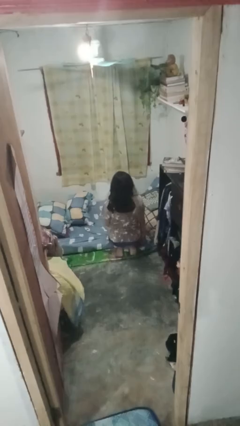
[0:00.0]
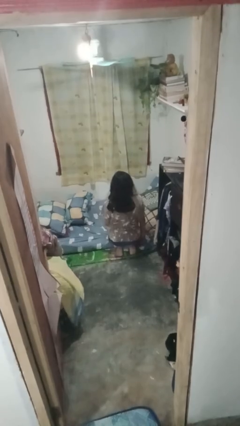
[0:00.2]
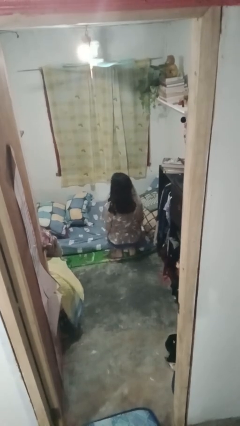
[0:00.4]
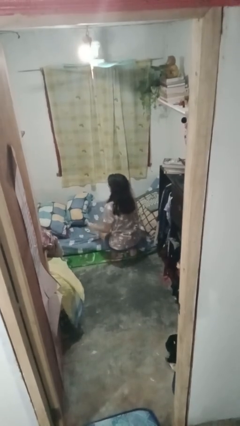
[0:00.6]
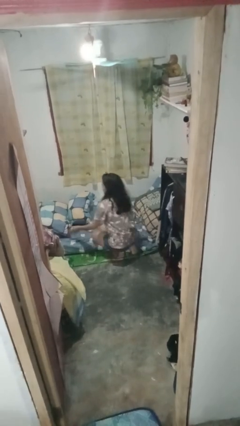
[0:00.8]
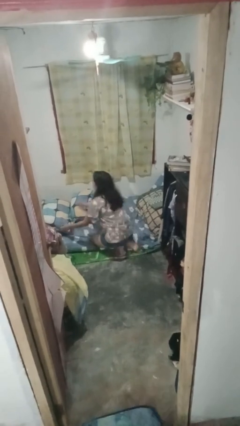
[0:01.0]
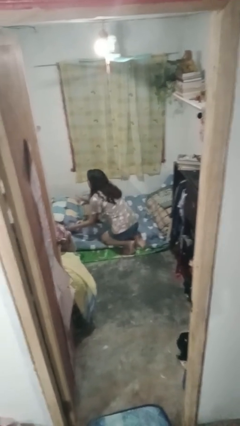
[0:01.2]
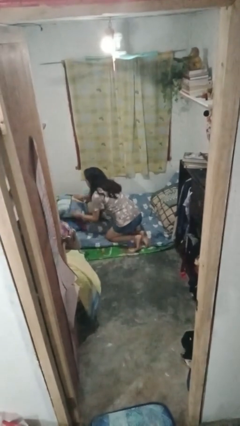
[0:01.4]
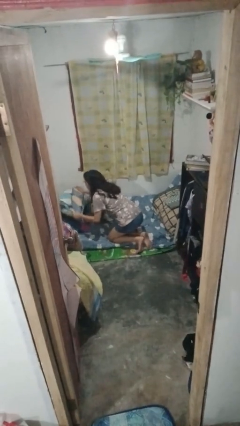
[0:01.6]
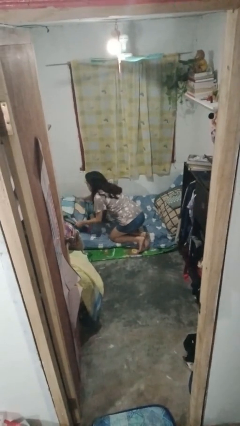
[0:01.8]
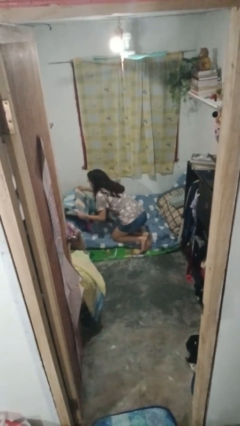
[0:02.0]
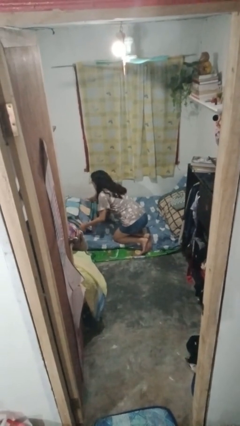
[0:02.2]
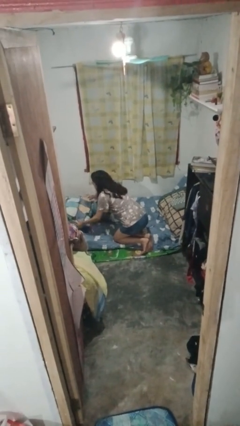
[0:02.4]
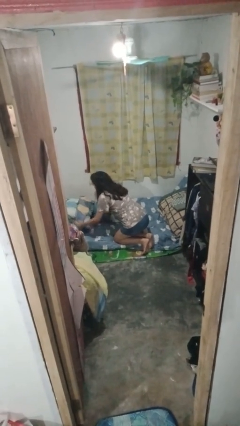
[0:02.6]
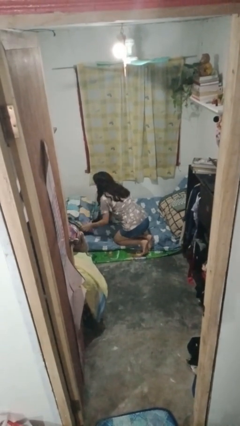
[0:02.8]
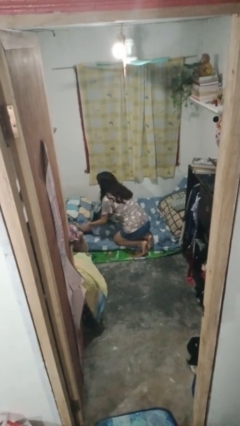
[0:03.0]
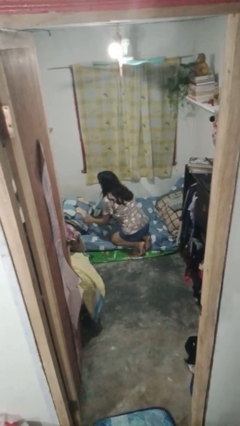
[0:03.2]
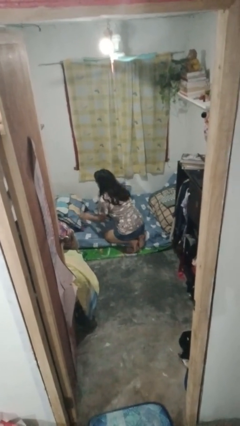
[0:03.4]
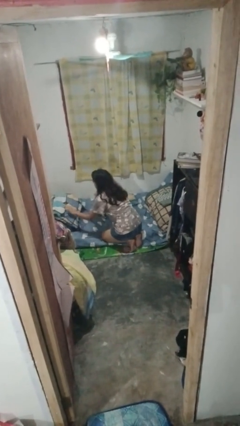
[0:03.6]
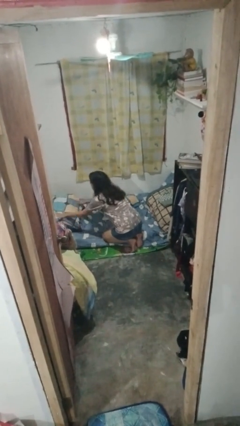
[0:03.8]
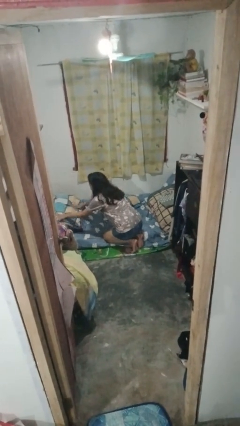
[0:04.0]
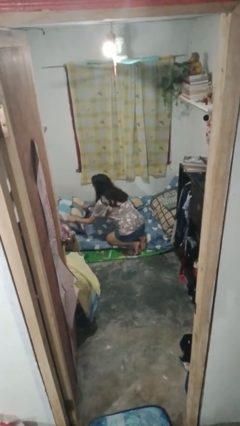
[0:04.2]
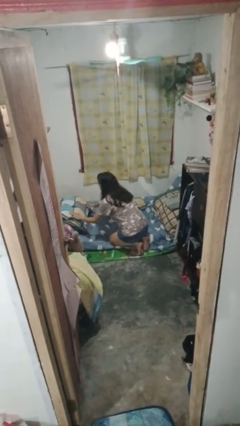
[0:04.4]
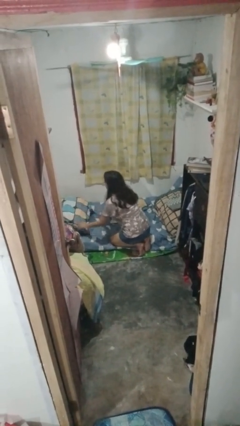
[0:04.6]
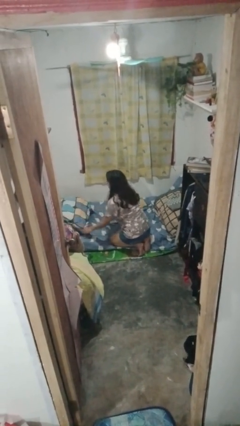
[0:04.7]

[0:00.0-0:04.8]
person makes bed

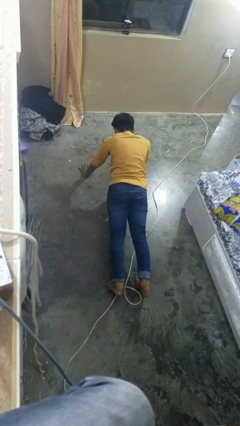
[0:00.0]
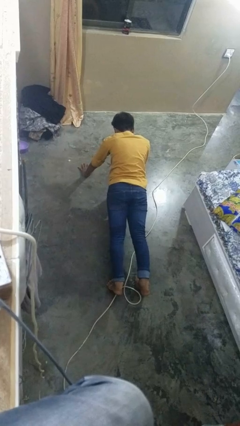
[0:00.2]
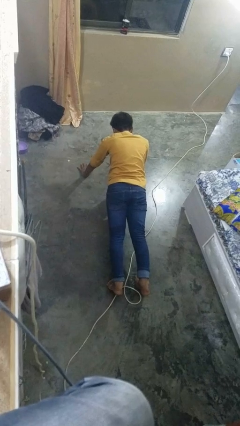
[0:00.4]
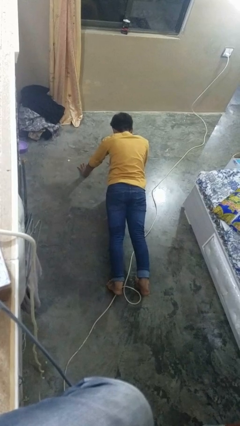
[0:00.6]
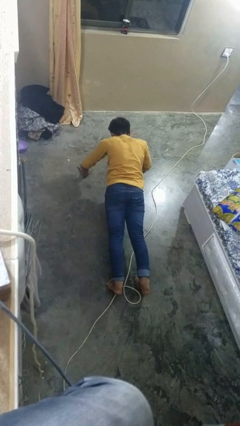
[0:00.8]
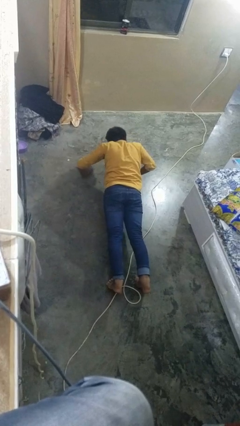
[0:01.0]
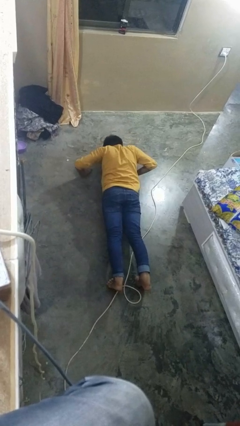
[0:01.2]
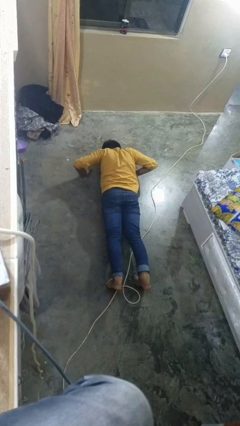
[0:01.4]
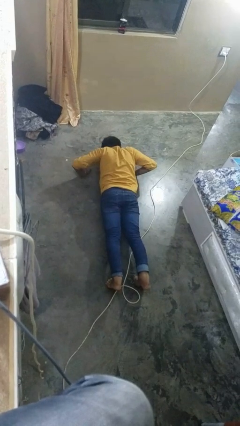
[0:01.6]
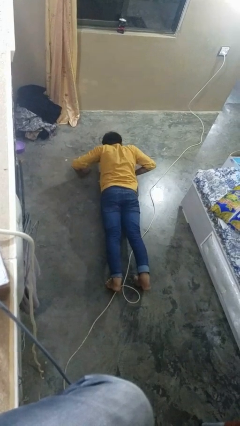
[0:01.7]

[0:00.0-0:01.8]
person exercises with pushup

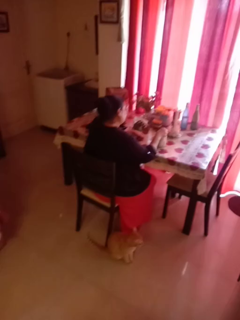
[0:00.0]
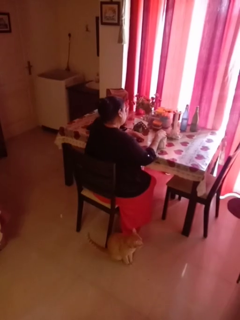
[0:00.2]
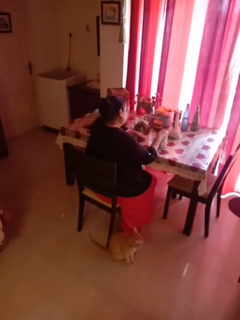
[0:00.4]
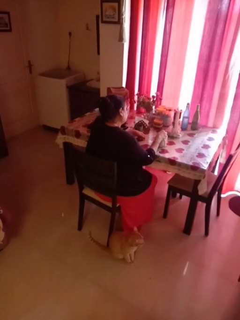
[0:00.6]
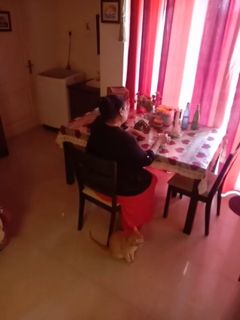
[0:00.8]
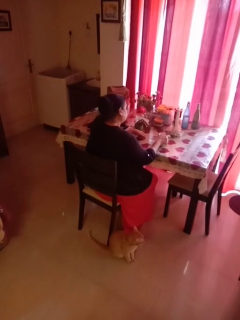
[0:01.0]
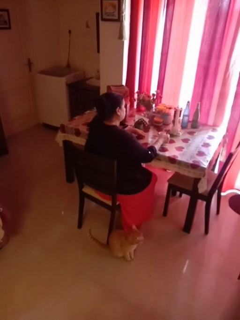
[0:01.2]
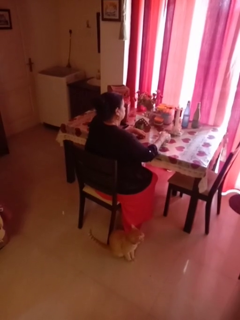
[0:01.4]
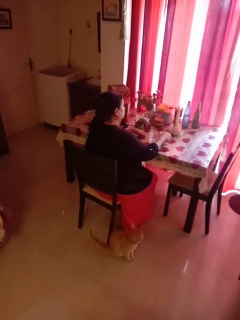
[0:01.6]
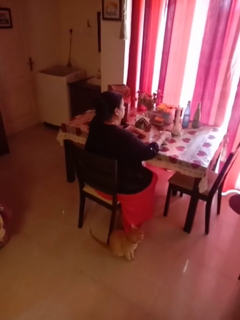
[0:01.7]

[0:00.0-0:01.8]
person stirs mug

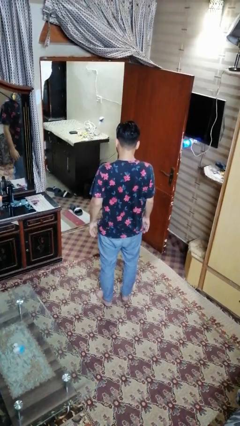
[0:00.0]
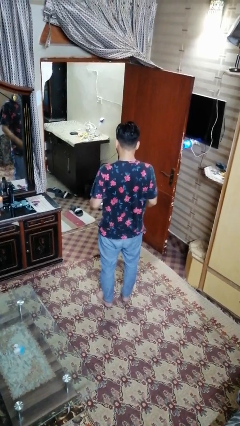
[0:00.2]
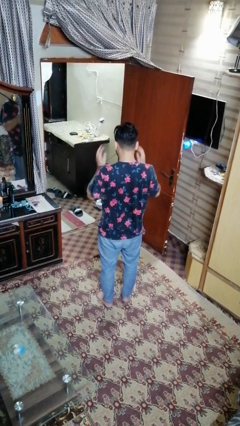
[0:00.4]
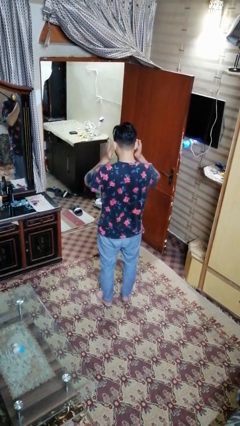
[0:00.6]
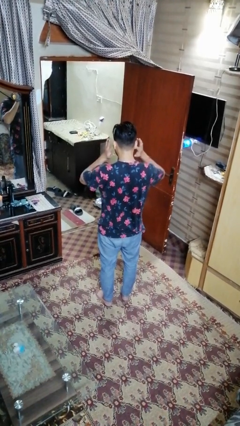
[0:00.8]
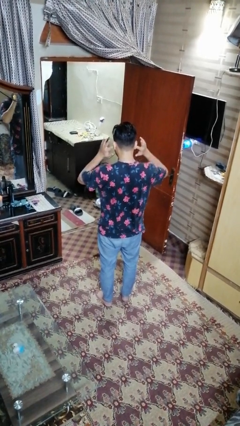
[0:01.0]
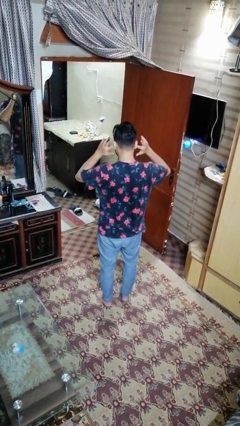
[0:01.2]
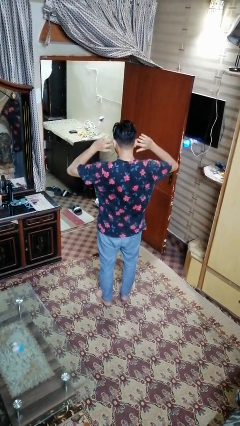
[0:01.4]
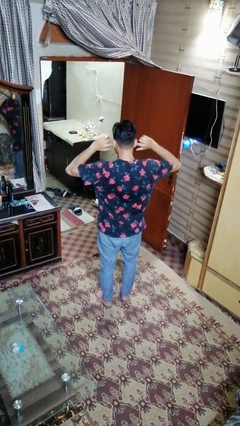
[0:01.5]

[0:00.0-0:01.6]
person puts fingers in ear

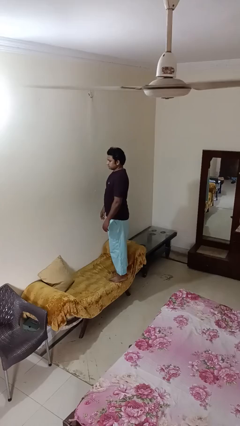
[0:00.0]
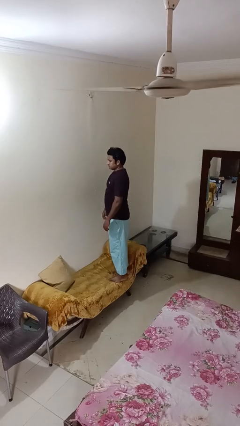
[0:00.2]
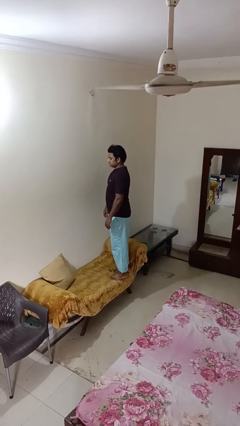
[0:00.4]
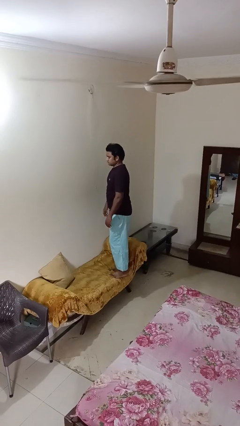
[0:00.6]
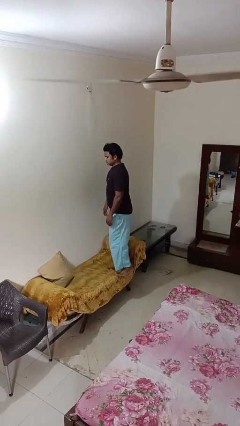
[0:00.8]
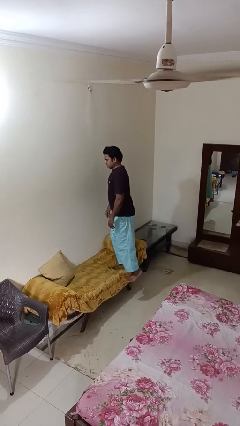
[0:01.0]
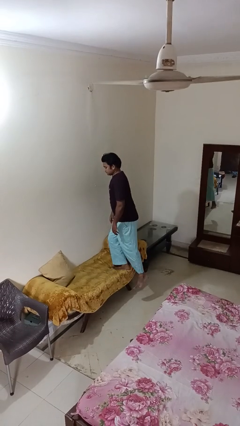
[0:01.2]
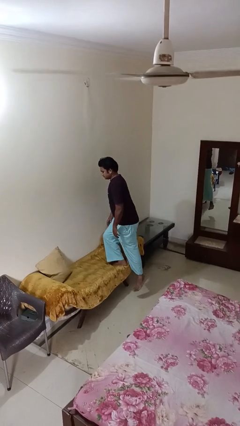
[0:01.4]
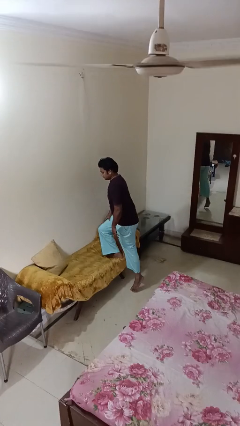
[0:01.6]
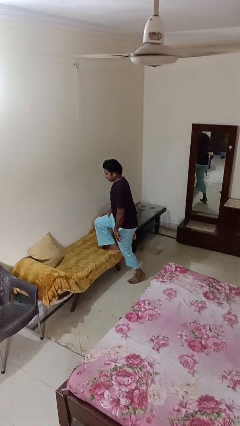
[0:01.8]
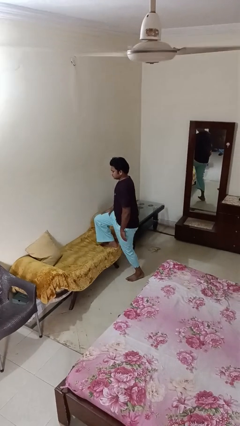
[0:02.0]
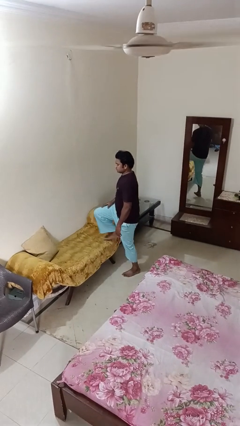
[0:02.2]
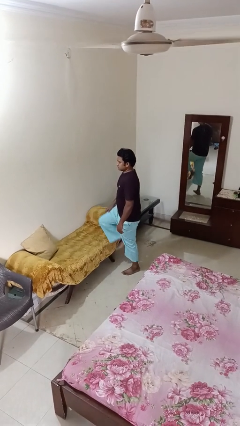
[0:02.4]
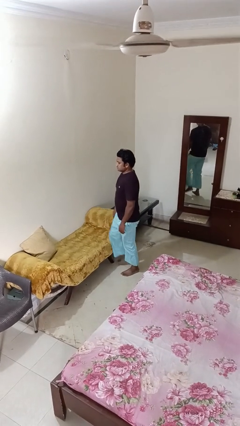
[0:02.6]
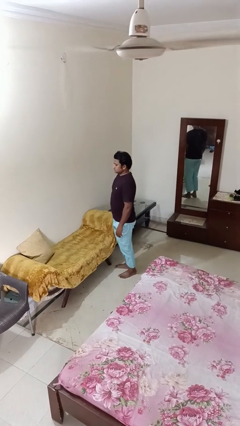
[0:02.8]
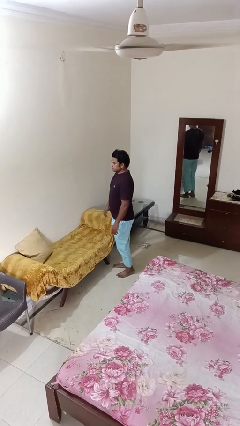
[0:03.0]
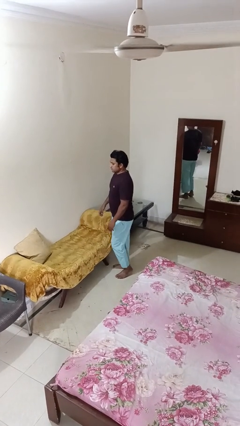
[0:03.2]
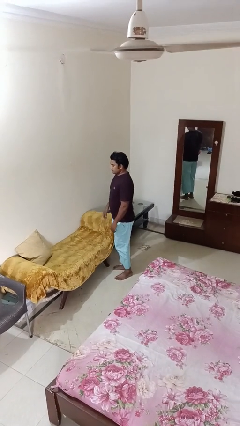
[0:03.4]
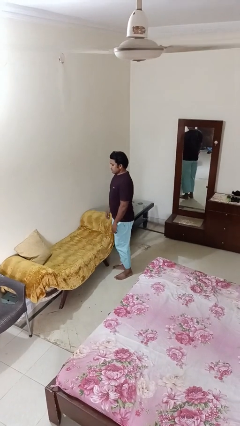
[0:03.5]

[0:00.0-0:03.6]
person climbs off couch

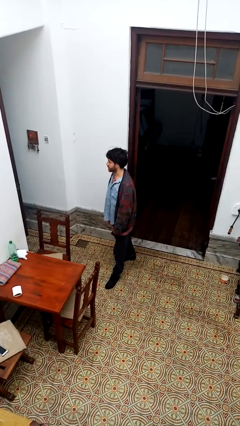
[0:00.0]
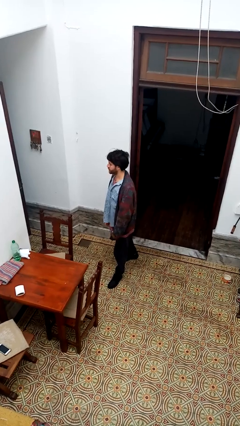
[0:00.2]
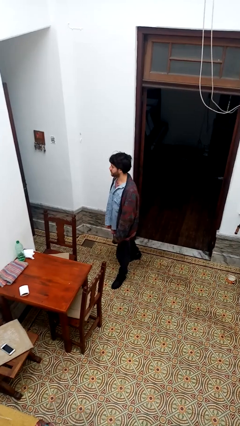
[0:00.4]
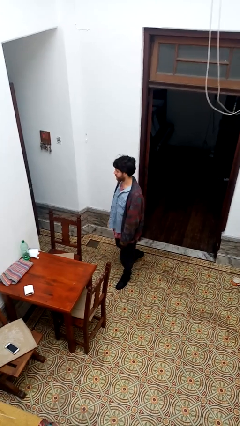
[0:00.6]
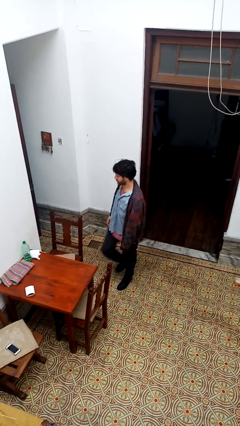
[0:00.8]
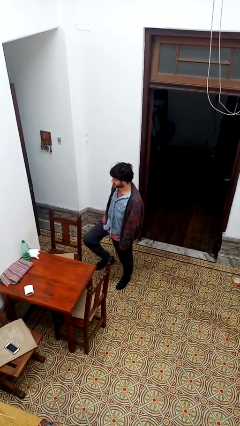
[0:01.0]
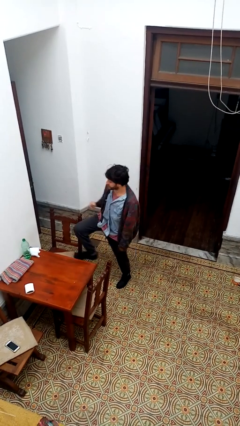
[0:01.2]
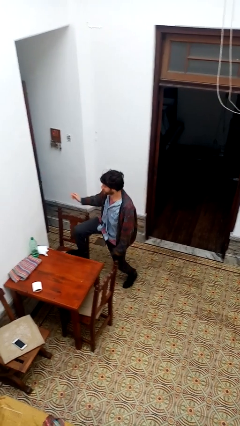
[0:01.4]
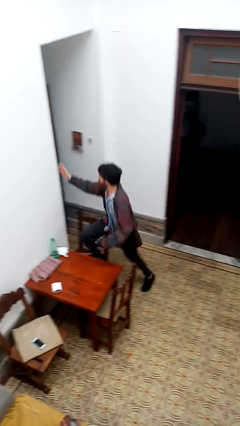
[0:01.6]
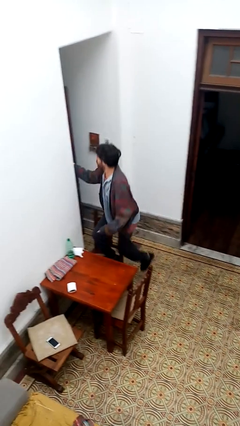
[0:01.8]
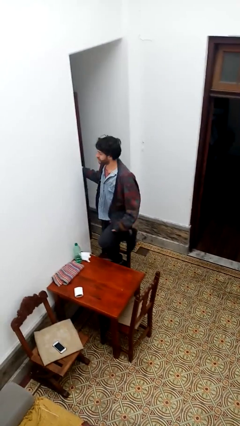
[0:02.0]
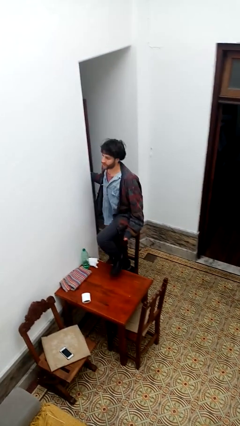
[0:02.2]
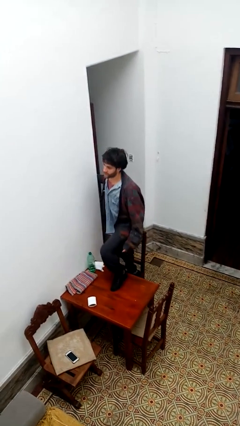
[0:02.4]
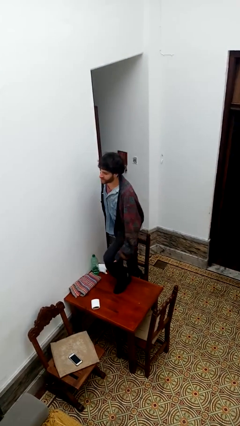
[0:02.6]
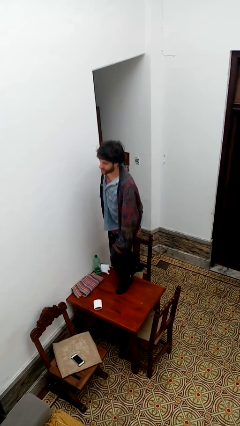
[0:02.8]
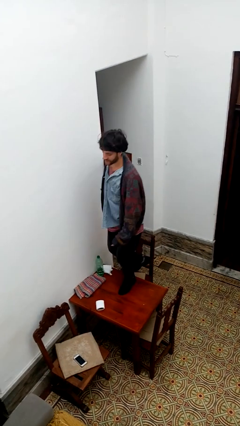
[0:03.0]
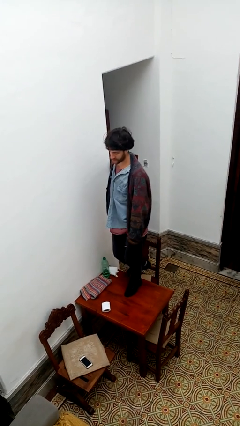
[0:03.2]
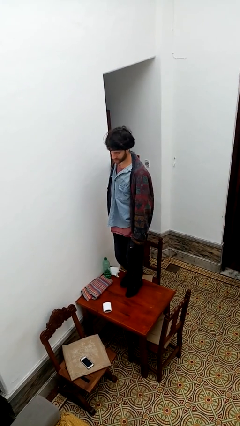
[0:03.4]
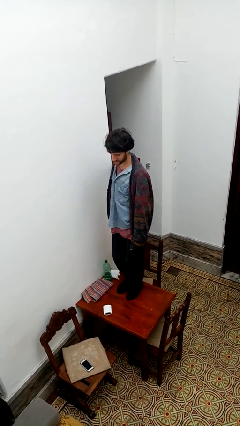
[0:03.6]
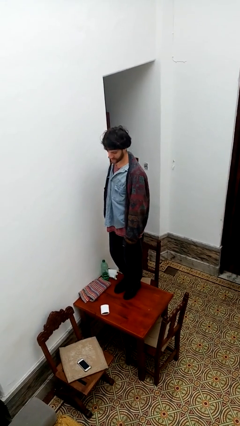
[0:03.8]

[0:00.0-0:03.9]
person climbs on table

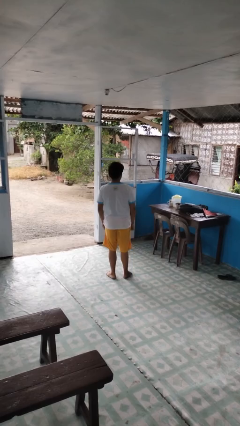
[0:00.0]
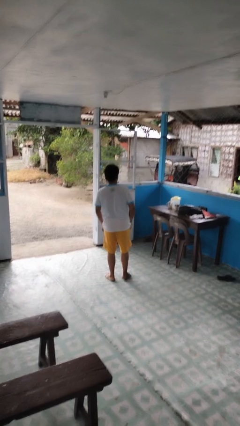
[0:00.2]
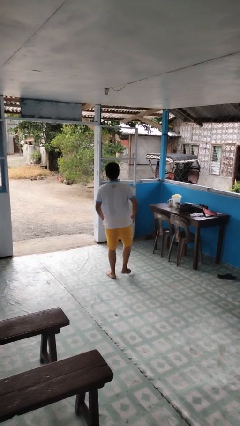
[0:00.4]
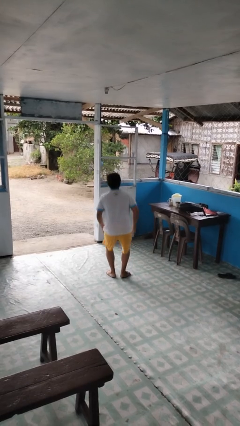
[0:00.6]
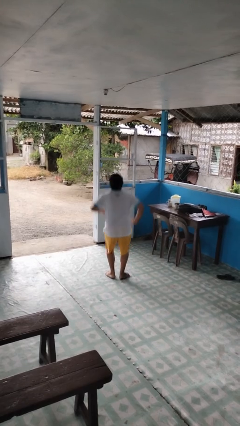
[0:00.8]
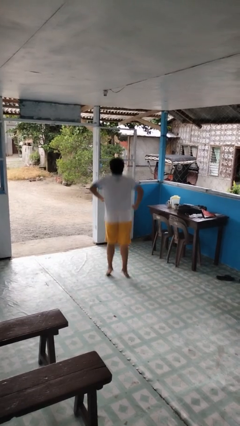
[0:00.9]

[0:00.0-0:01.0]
person jumps
